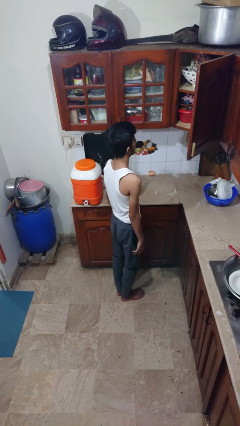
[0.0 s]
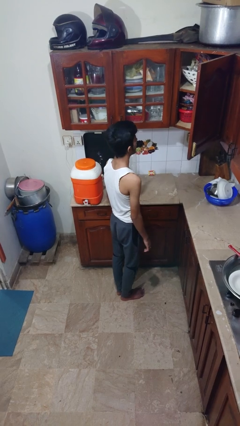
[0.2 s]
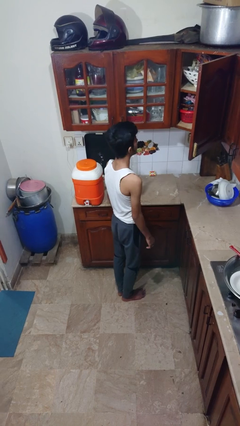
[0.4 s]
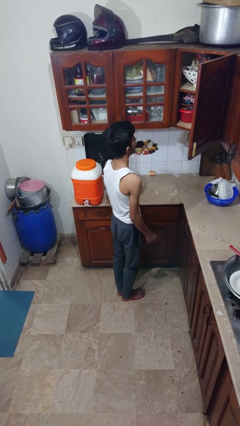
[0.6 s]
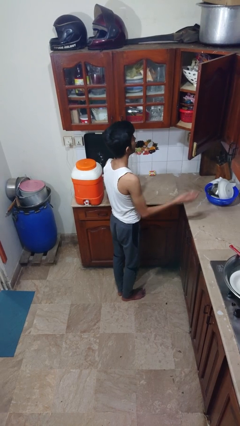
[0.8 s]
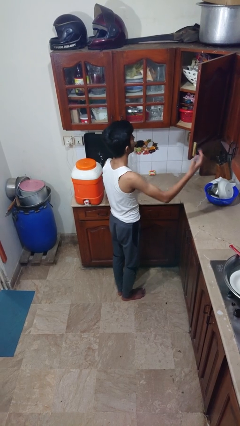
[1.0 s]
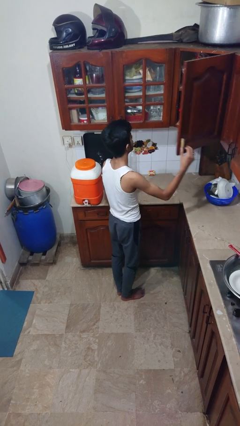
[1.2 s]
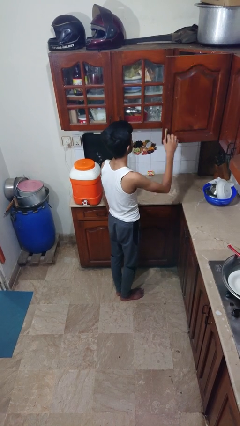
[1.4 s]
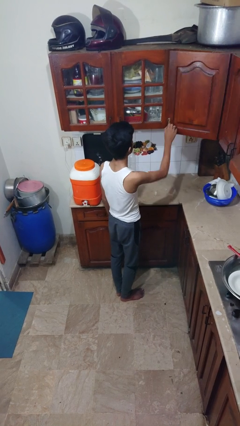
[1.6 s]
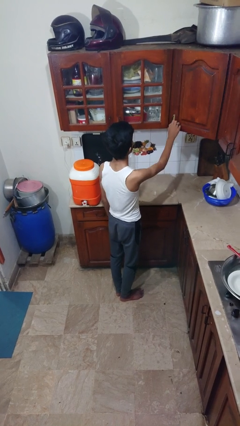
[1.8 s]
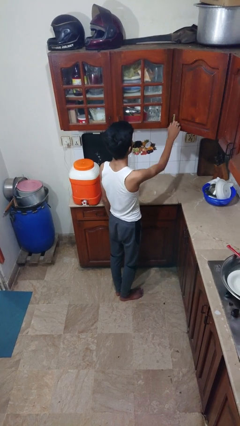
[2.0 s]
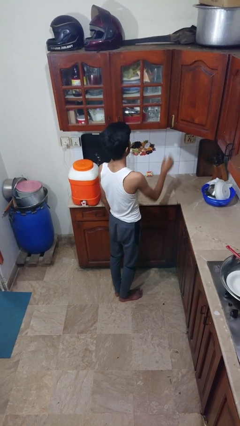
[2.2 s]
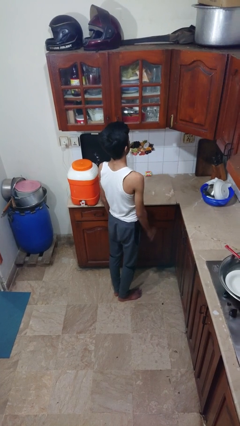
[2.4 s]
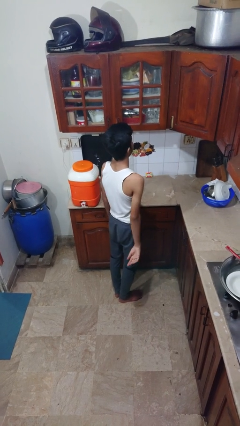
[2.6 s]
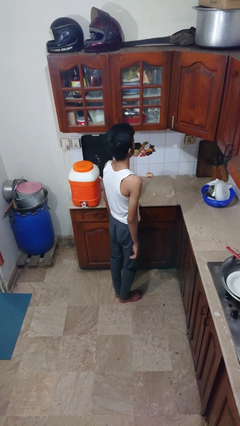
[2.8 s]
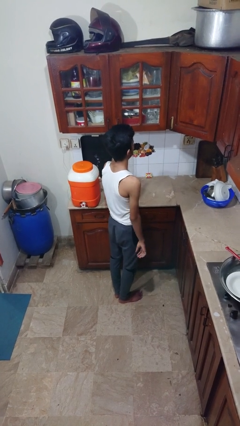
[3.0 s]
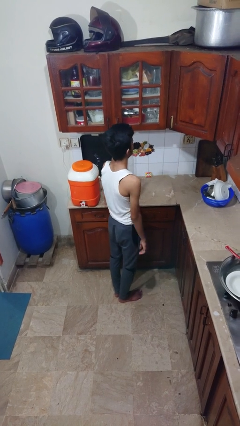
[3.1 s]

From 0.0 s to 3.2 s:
person closes cabinet

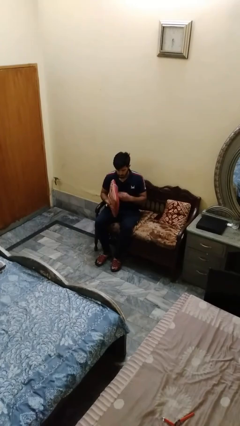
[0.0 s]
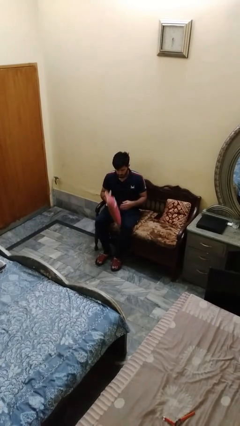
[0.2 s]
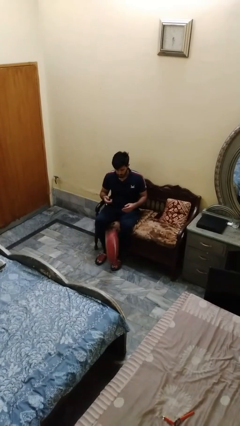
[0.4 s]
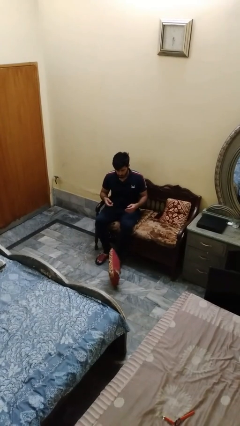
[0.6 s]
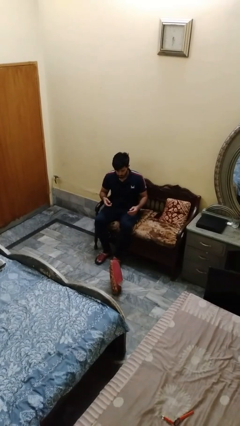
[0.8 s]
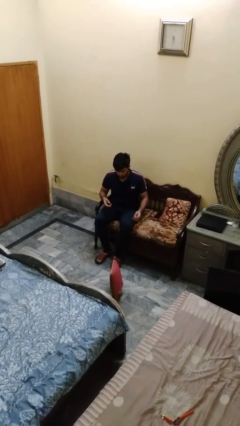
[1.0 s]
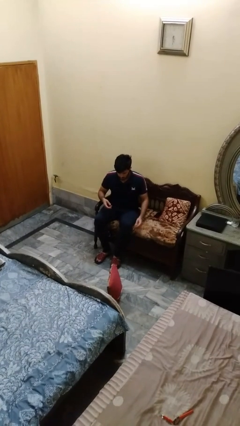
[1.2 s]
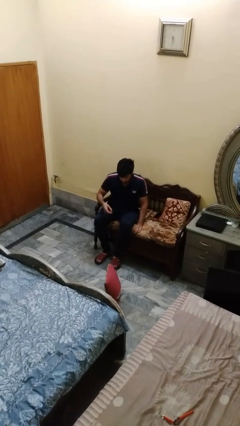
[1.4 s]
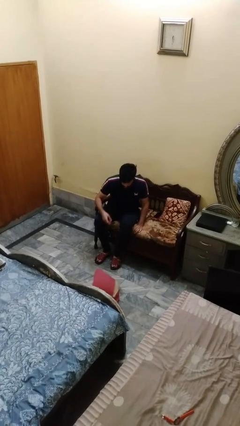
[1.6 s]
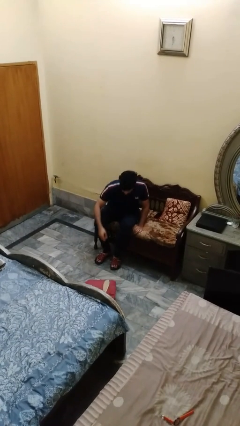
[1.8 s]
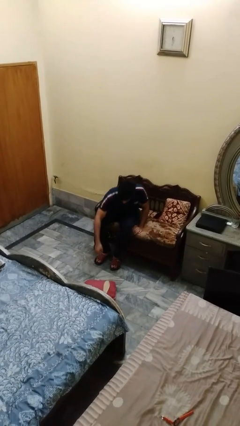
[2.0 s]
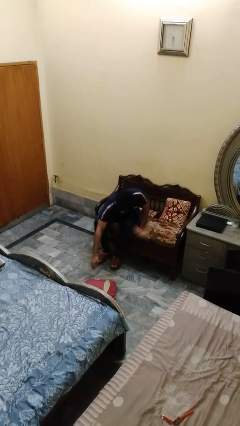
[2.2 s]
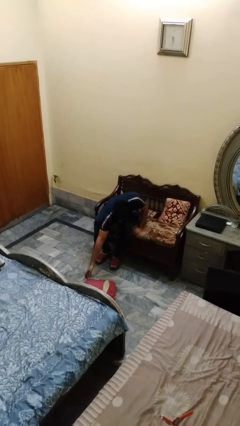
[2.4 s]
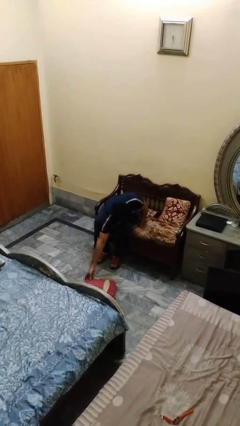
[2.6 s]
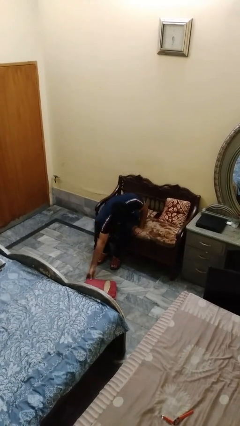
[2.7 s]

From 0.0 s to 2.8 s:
person drops object

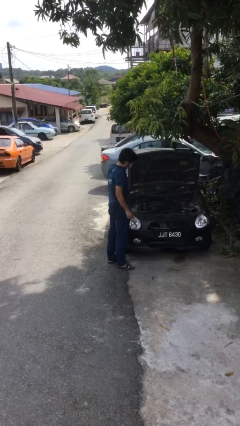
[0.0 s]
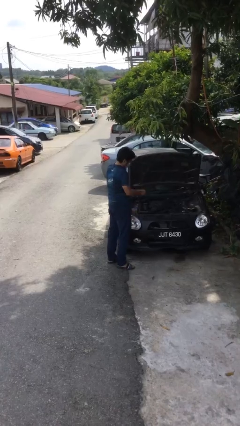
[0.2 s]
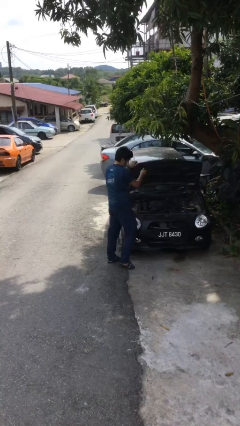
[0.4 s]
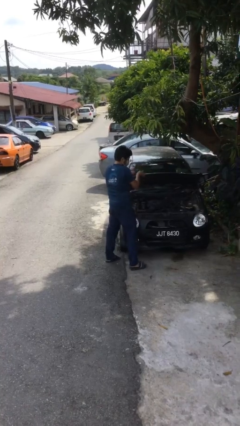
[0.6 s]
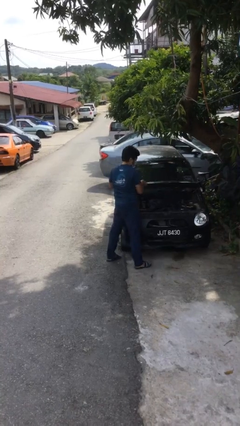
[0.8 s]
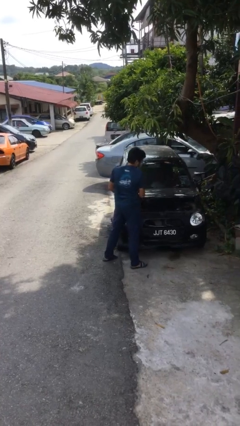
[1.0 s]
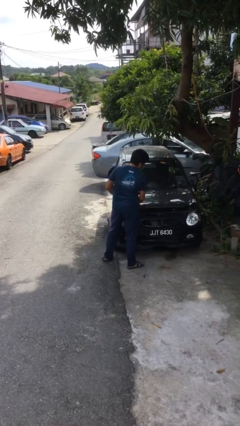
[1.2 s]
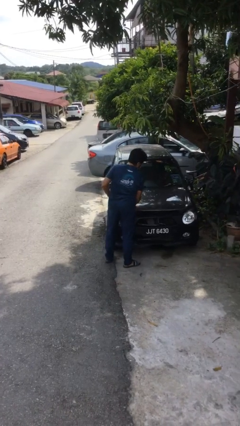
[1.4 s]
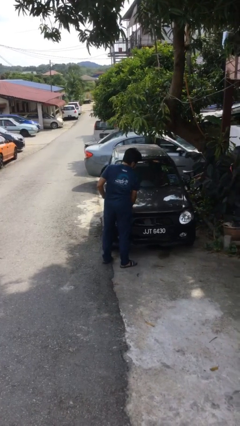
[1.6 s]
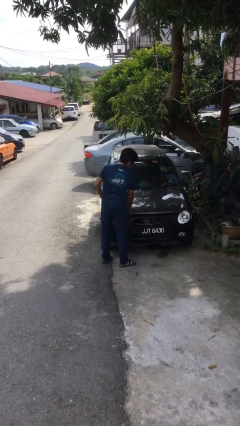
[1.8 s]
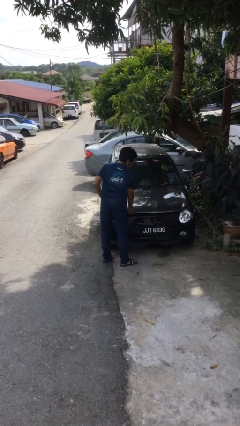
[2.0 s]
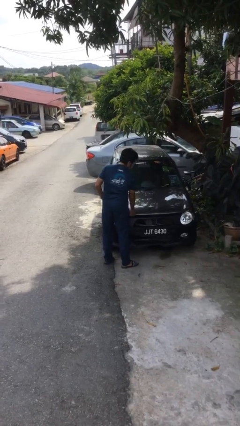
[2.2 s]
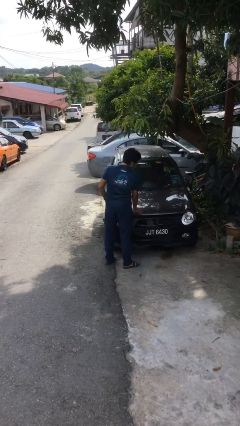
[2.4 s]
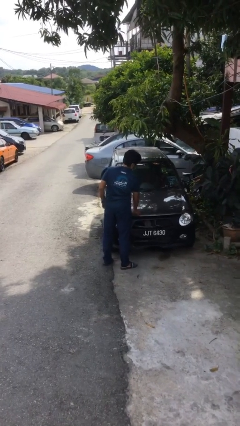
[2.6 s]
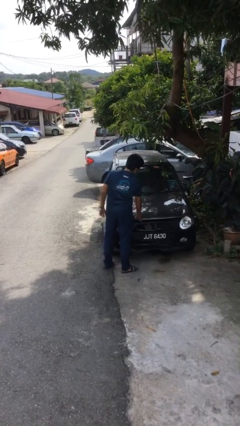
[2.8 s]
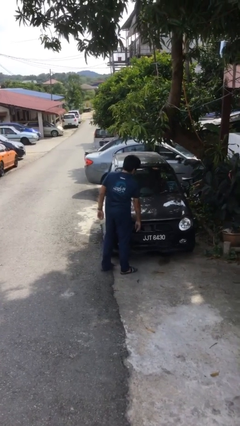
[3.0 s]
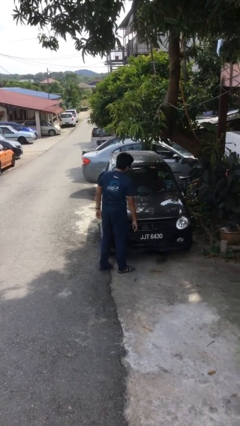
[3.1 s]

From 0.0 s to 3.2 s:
person closes car hood

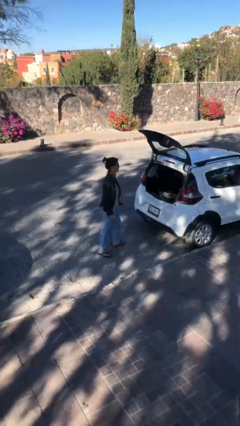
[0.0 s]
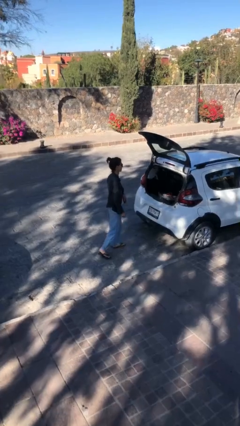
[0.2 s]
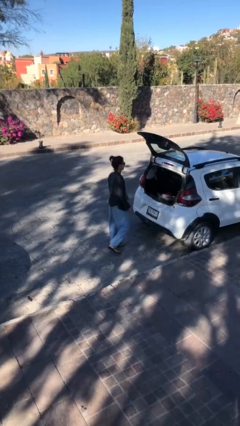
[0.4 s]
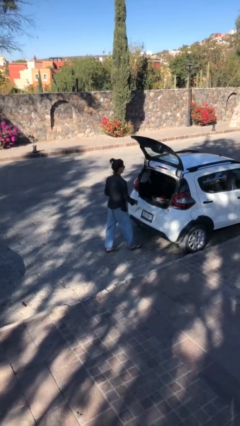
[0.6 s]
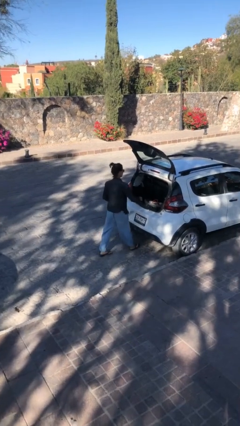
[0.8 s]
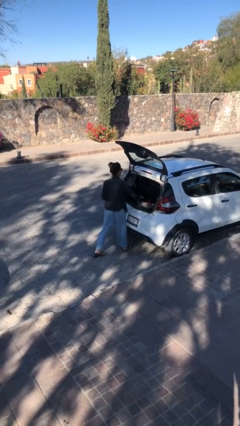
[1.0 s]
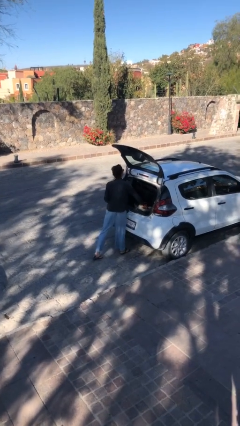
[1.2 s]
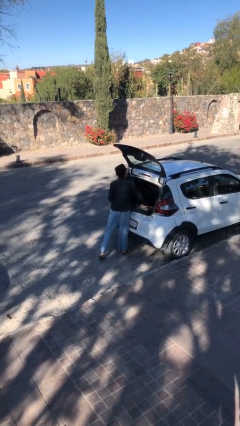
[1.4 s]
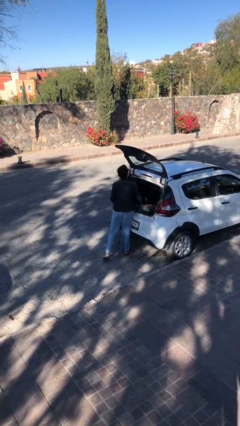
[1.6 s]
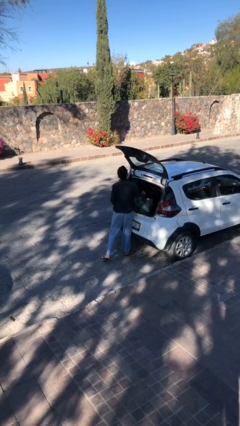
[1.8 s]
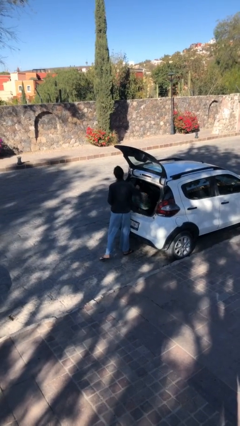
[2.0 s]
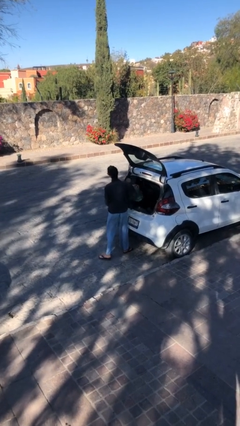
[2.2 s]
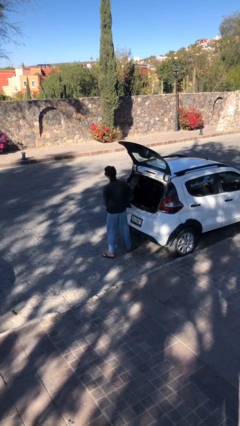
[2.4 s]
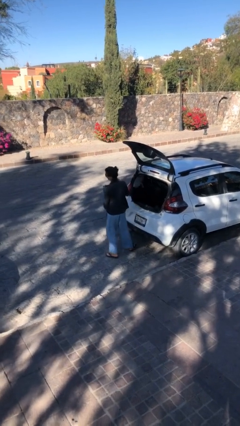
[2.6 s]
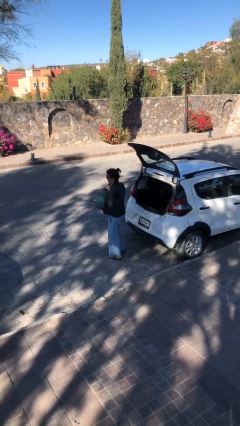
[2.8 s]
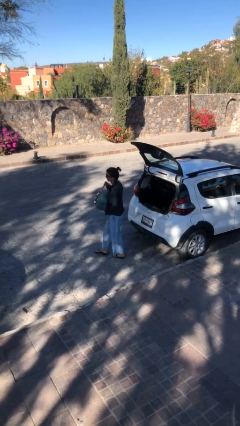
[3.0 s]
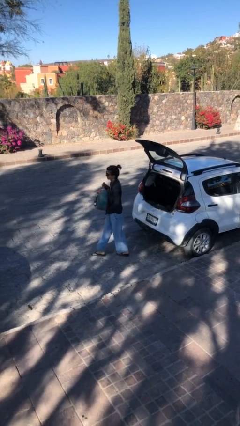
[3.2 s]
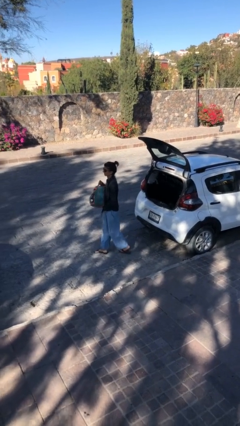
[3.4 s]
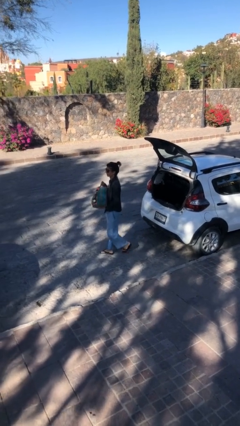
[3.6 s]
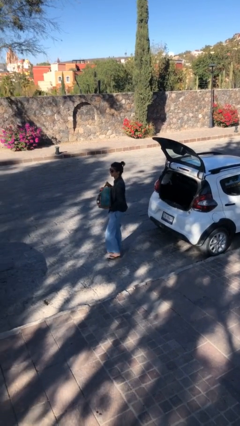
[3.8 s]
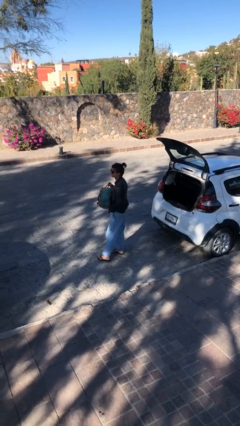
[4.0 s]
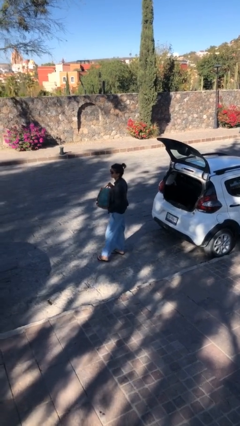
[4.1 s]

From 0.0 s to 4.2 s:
person loads car

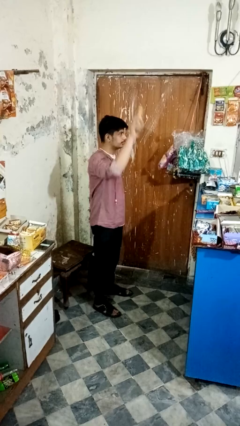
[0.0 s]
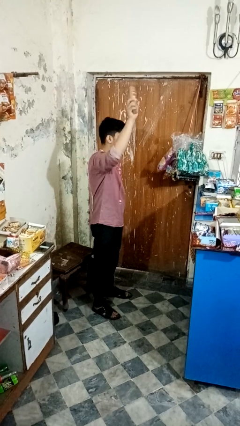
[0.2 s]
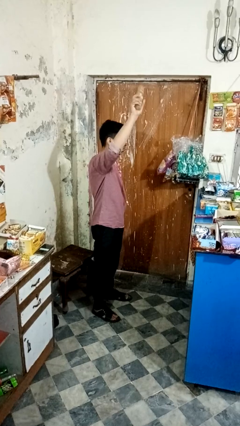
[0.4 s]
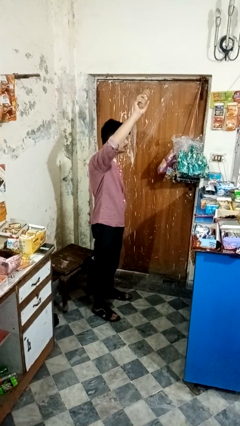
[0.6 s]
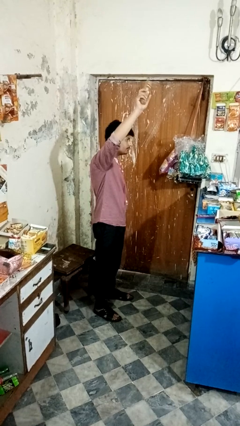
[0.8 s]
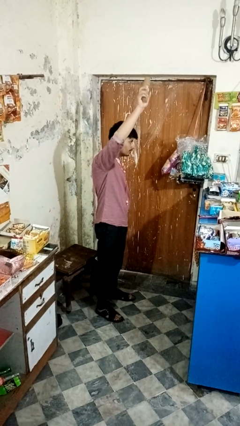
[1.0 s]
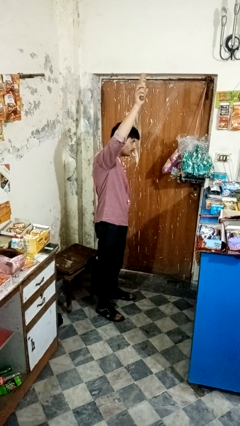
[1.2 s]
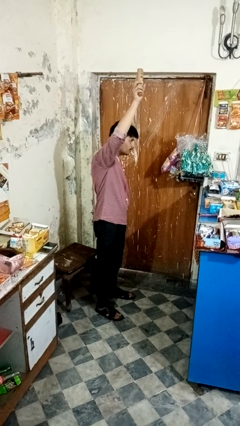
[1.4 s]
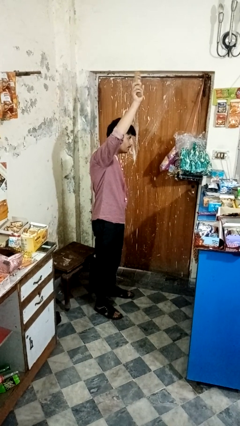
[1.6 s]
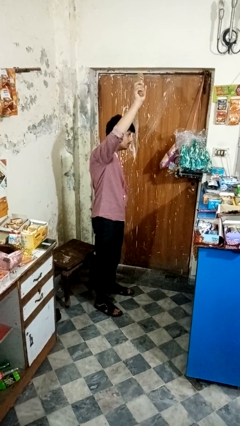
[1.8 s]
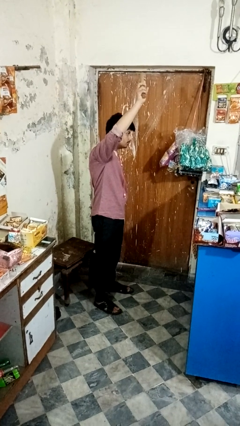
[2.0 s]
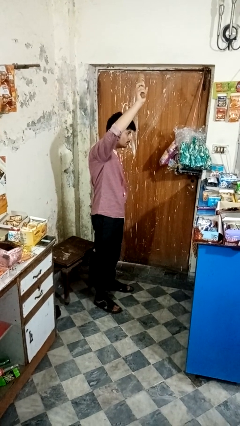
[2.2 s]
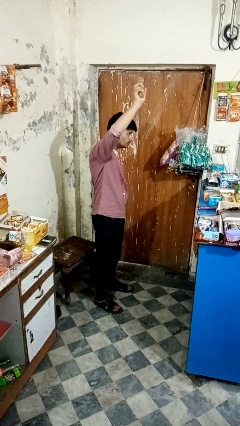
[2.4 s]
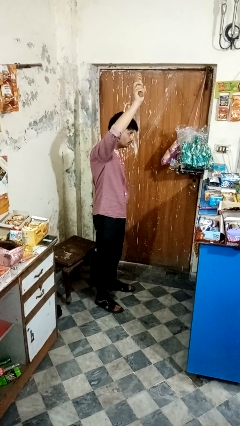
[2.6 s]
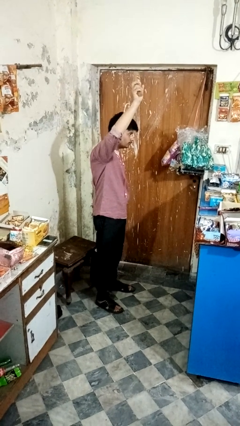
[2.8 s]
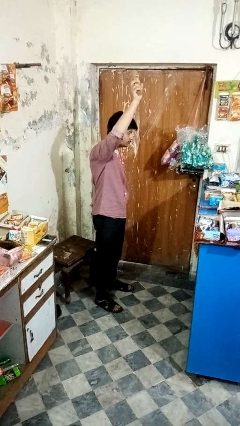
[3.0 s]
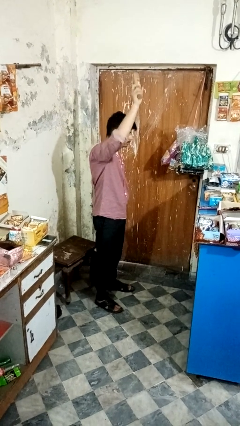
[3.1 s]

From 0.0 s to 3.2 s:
person holds object above head

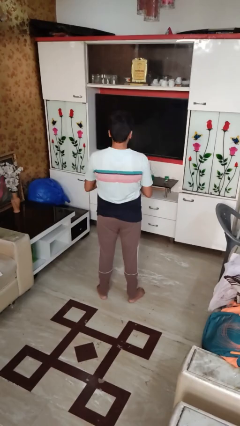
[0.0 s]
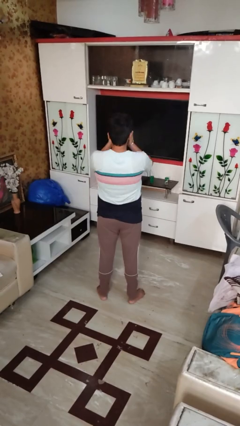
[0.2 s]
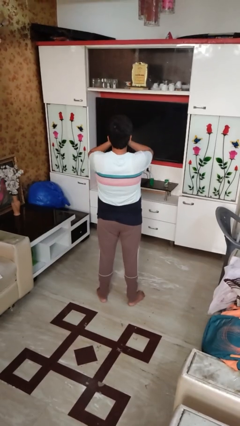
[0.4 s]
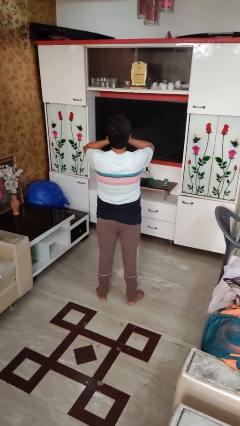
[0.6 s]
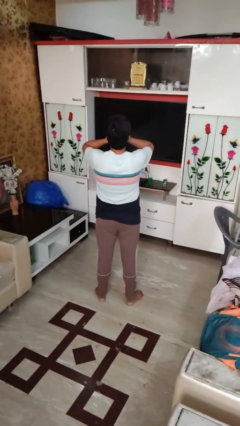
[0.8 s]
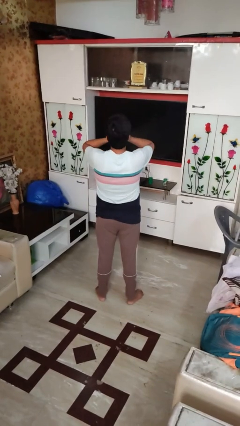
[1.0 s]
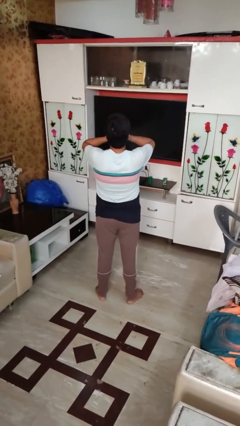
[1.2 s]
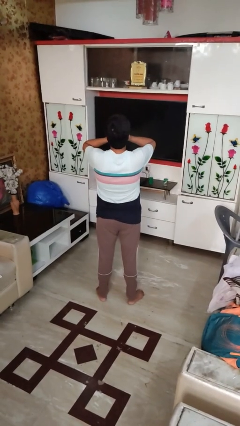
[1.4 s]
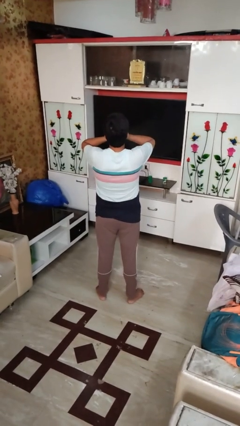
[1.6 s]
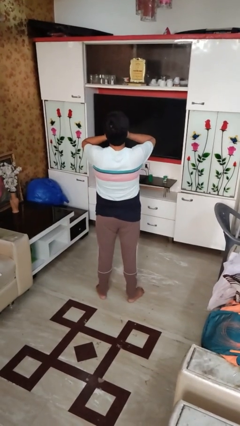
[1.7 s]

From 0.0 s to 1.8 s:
person covers face with hands
